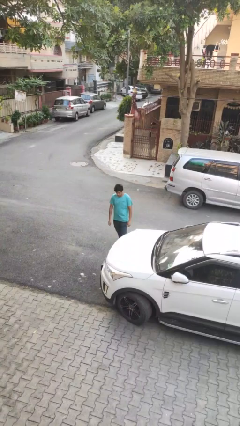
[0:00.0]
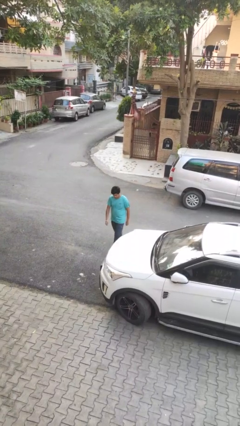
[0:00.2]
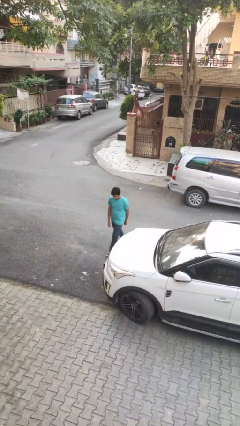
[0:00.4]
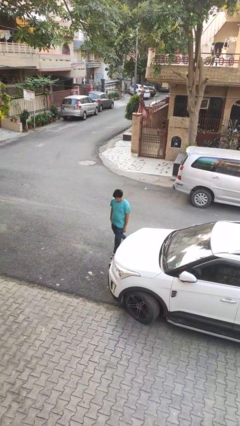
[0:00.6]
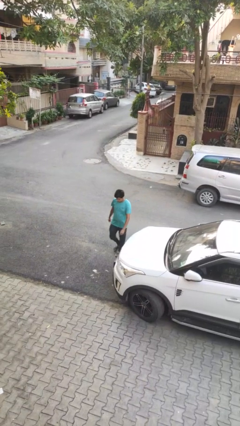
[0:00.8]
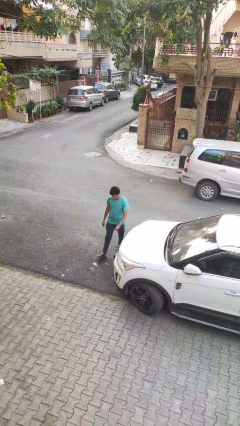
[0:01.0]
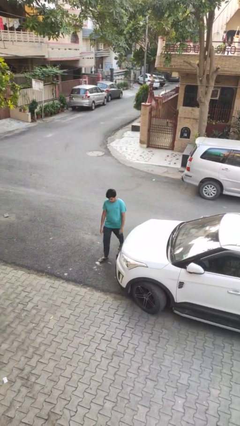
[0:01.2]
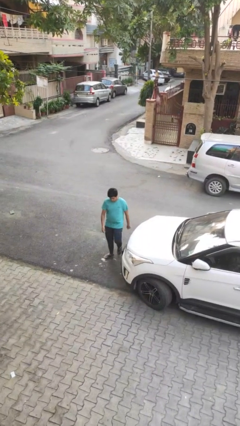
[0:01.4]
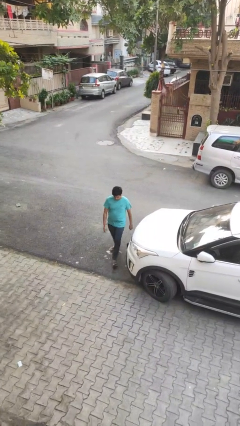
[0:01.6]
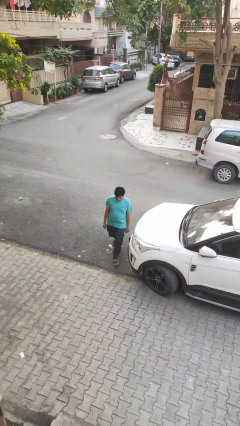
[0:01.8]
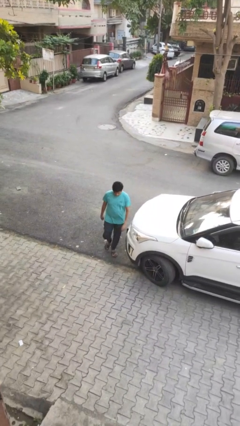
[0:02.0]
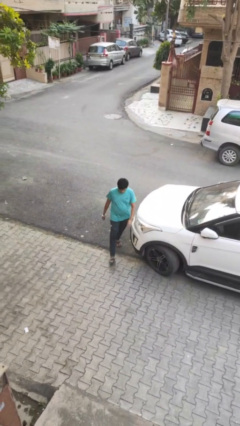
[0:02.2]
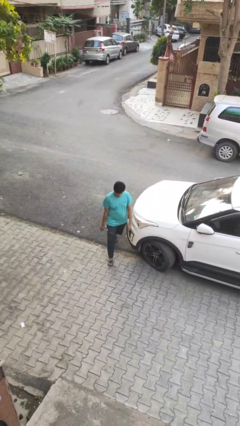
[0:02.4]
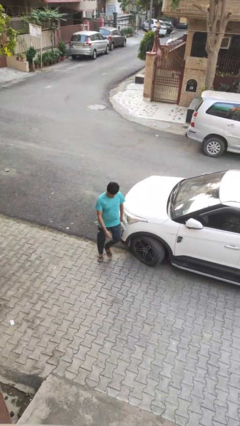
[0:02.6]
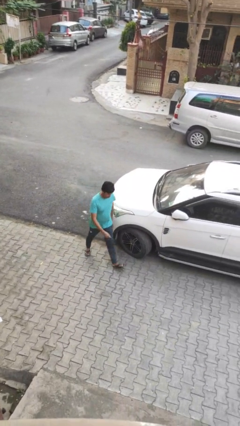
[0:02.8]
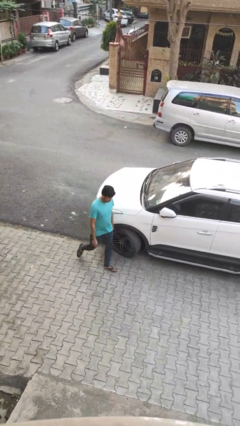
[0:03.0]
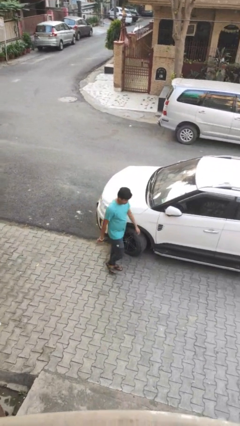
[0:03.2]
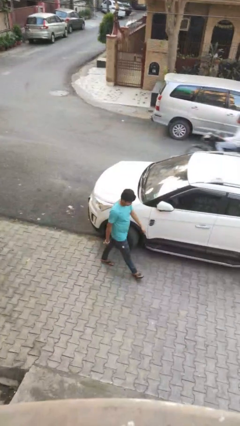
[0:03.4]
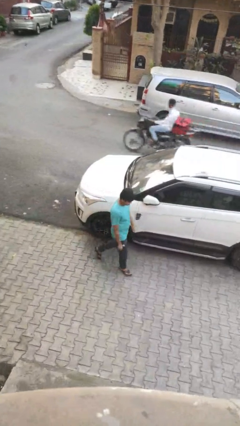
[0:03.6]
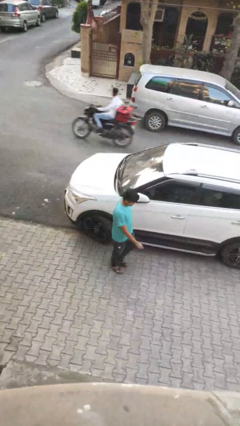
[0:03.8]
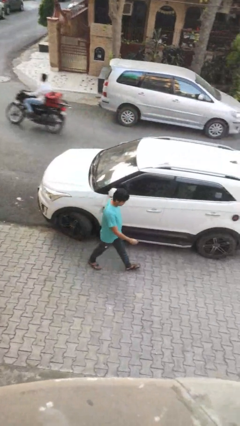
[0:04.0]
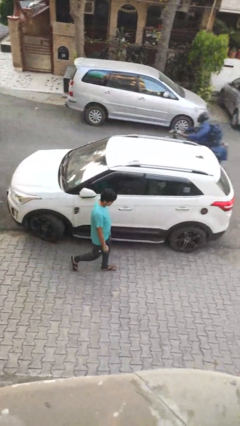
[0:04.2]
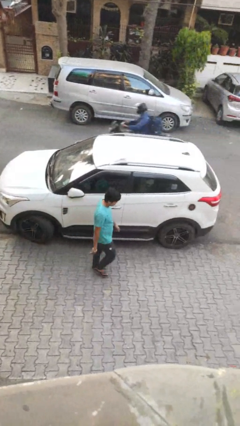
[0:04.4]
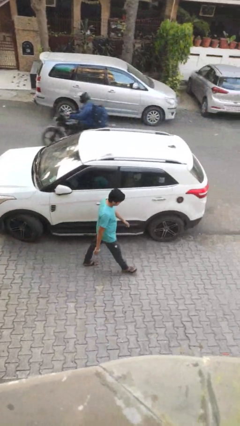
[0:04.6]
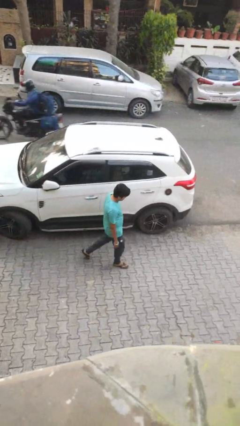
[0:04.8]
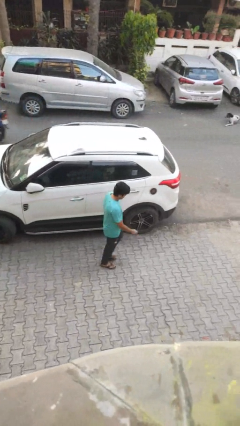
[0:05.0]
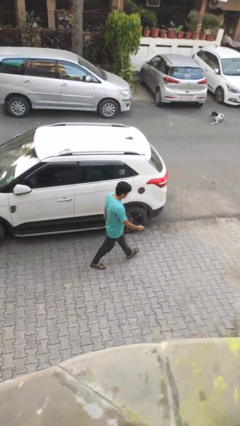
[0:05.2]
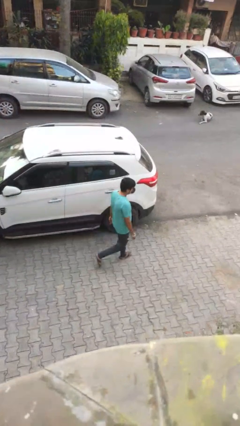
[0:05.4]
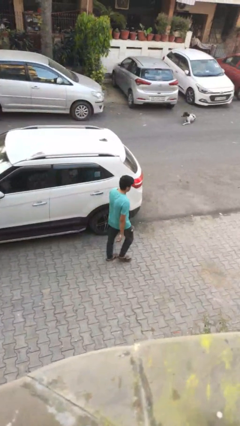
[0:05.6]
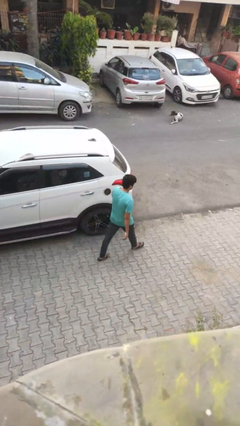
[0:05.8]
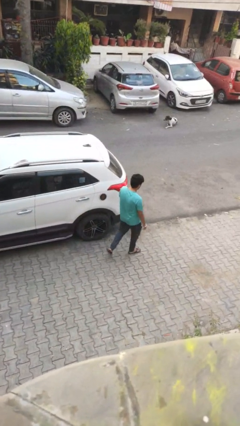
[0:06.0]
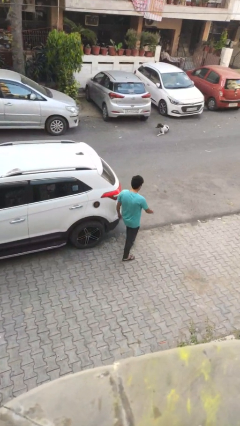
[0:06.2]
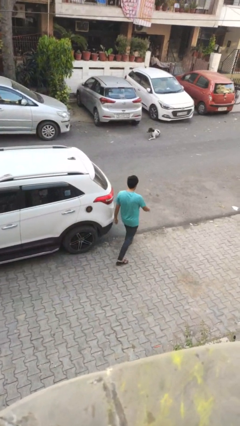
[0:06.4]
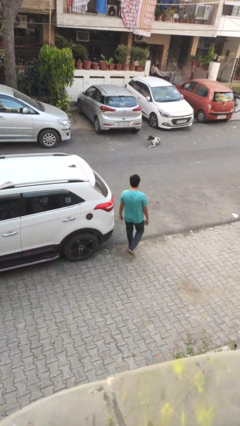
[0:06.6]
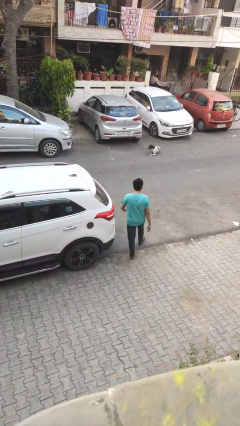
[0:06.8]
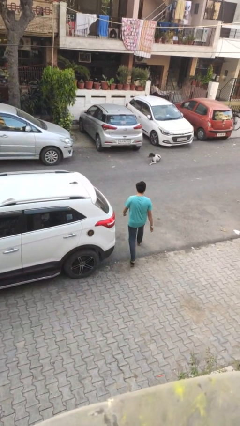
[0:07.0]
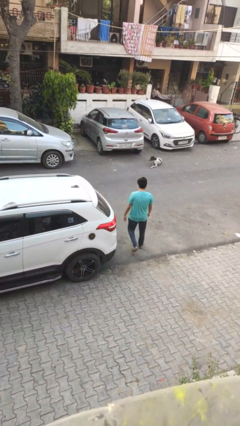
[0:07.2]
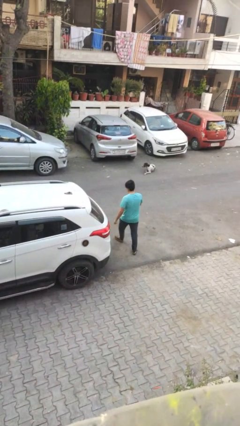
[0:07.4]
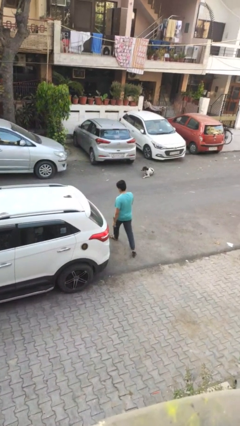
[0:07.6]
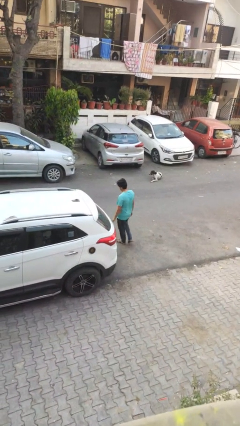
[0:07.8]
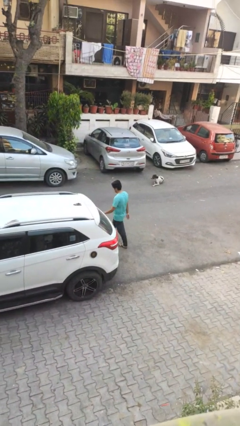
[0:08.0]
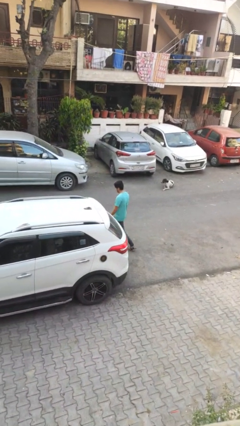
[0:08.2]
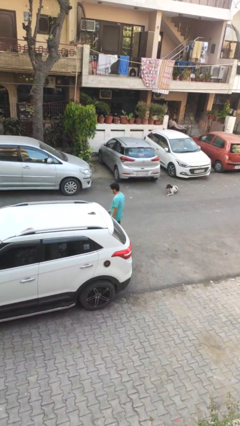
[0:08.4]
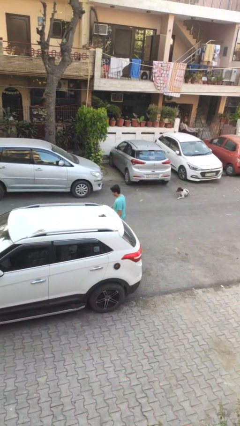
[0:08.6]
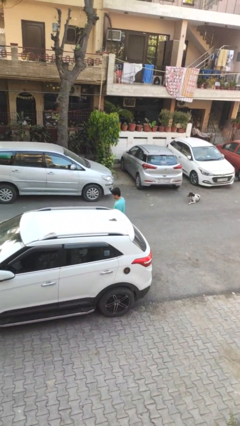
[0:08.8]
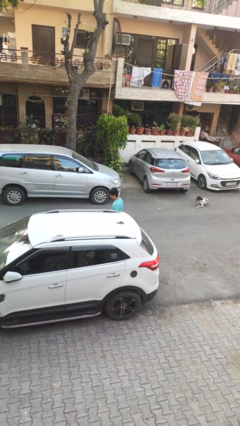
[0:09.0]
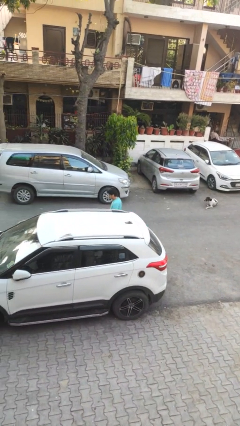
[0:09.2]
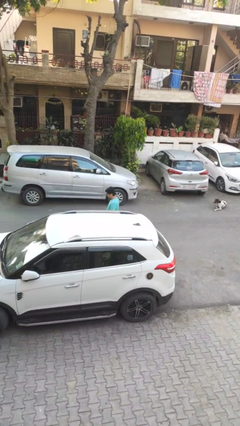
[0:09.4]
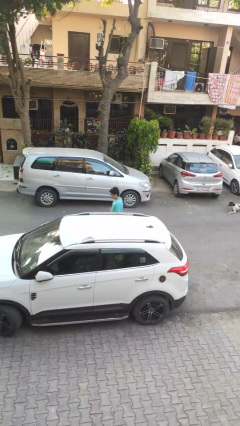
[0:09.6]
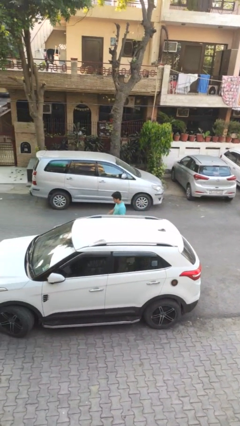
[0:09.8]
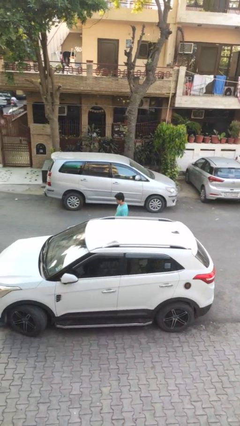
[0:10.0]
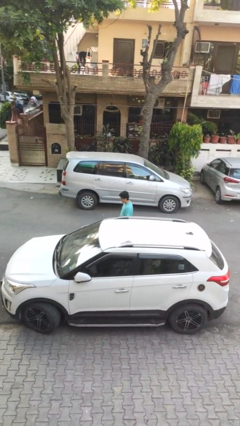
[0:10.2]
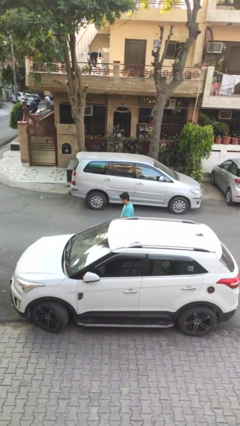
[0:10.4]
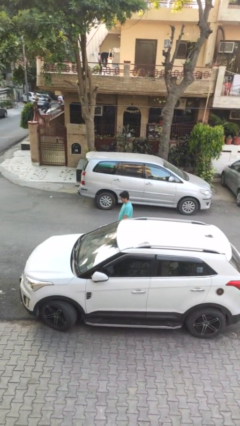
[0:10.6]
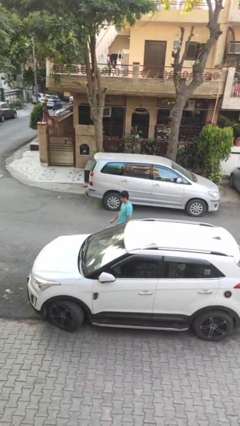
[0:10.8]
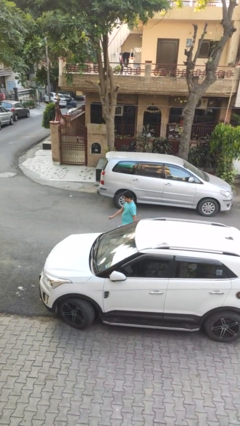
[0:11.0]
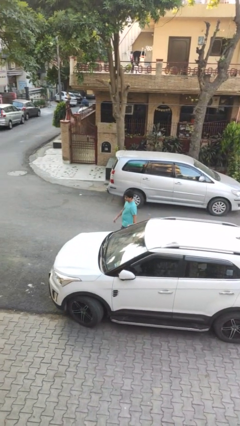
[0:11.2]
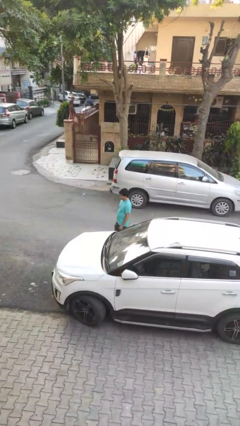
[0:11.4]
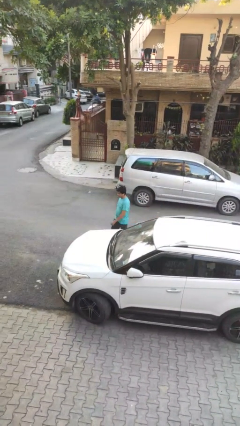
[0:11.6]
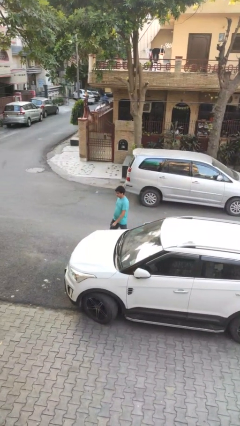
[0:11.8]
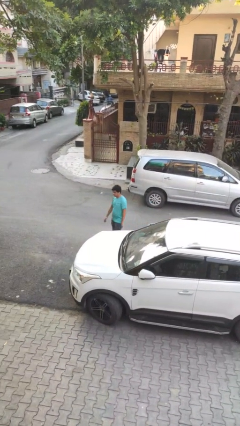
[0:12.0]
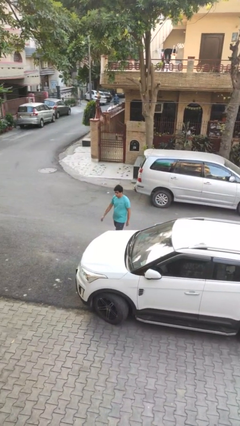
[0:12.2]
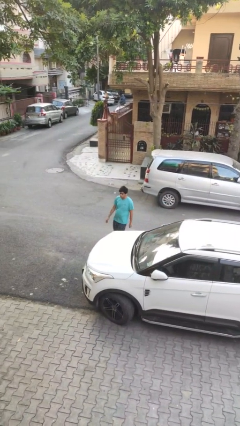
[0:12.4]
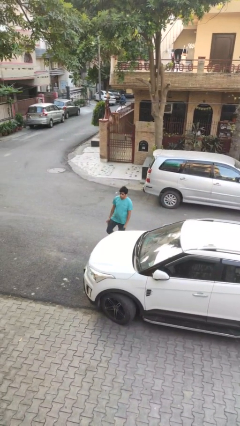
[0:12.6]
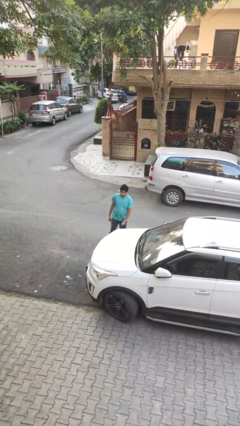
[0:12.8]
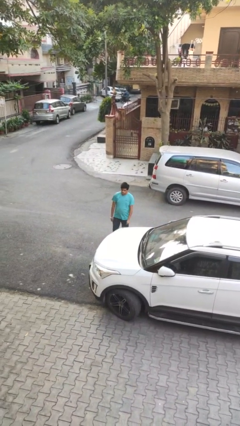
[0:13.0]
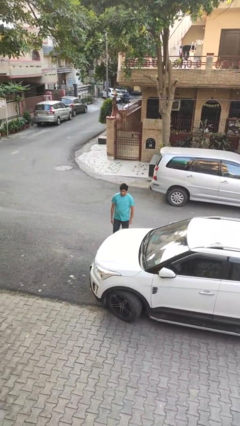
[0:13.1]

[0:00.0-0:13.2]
person walks around car

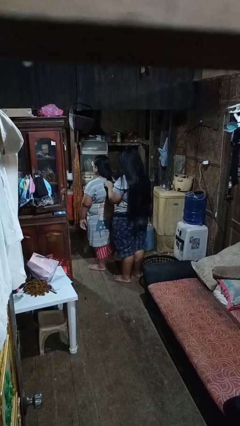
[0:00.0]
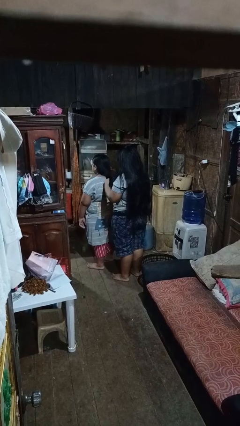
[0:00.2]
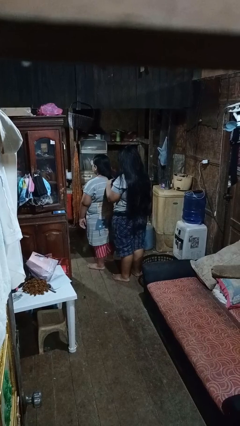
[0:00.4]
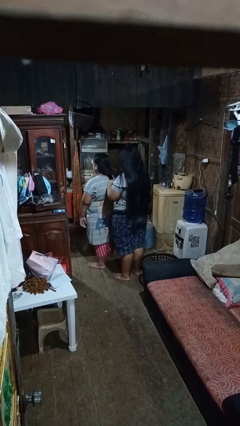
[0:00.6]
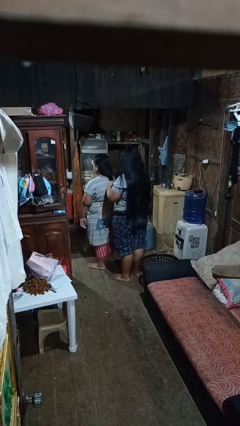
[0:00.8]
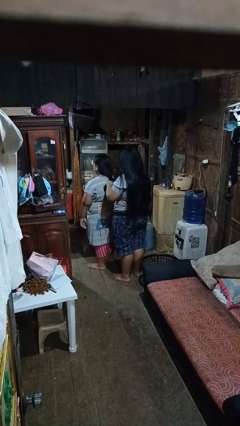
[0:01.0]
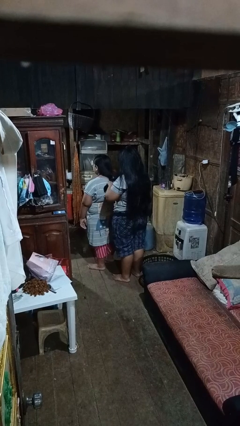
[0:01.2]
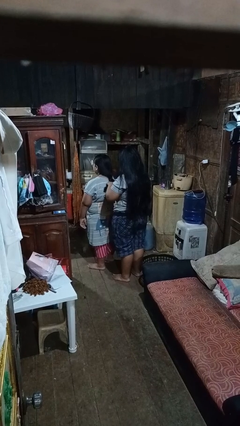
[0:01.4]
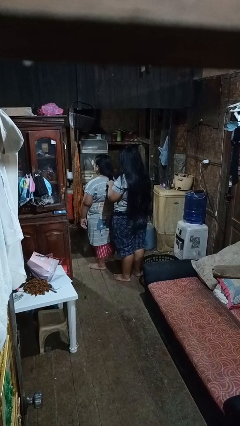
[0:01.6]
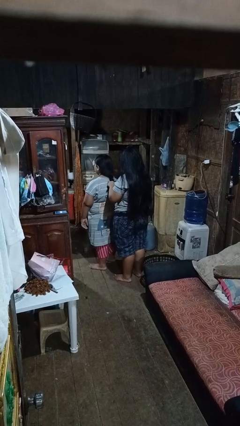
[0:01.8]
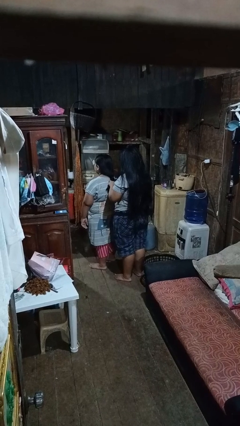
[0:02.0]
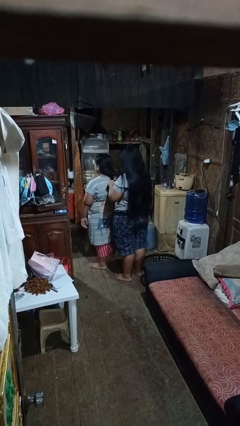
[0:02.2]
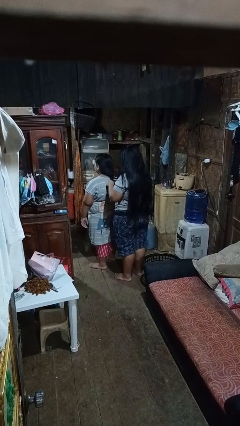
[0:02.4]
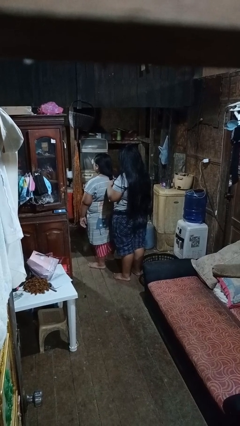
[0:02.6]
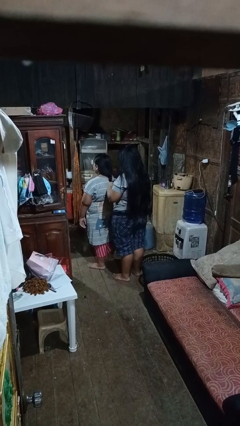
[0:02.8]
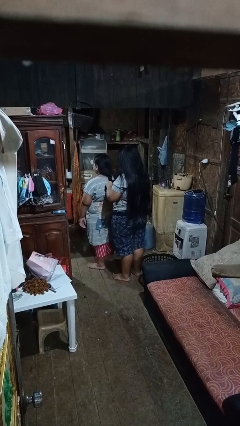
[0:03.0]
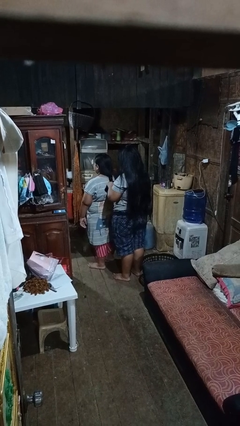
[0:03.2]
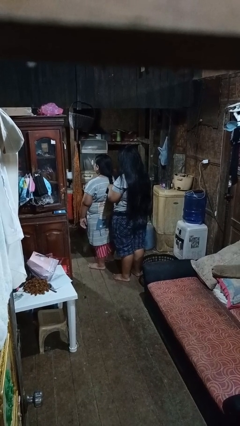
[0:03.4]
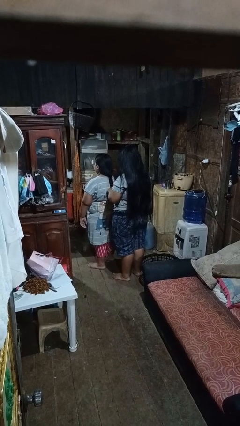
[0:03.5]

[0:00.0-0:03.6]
person braids hair of person

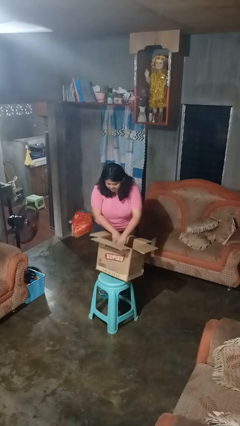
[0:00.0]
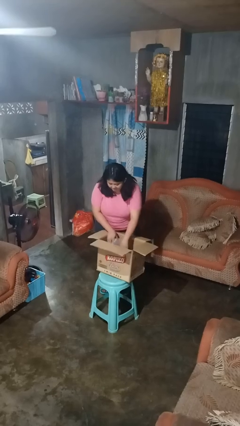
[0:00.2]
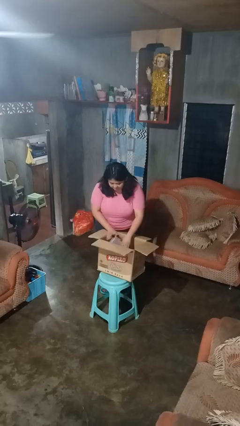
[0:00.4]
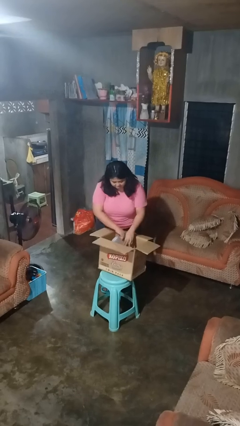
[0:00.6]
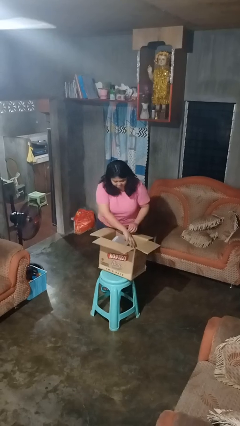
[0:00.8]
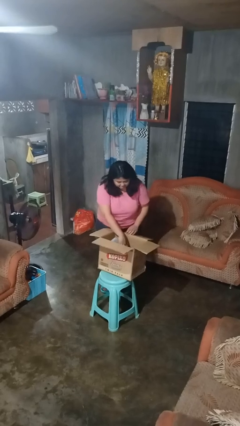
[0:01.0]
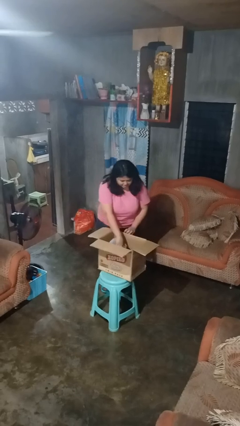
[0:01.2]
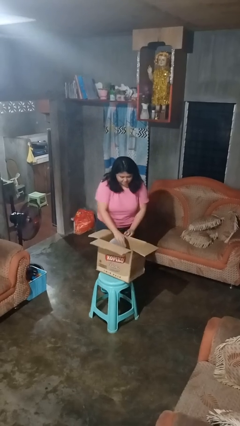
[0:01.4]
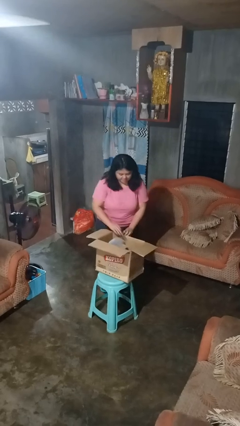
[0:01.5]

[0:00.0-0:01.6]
person searches in box
